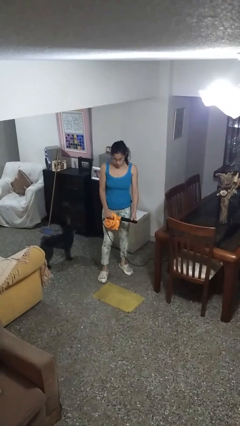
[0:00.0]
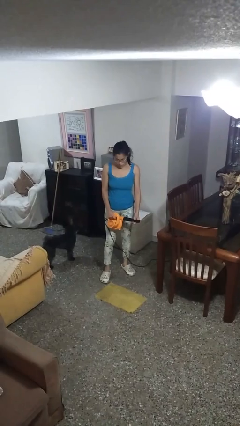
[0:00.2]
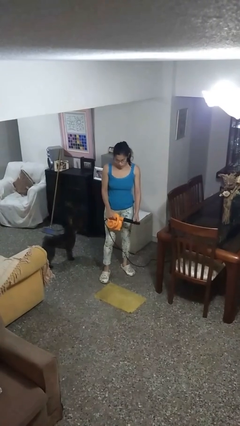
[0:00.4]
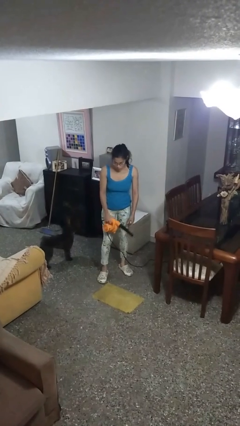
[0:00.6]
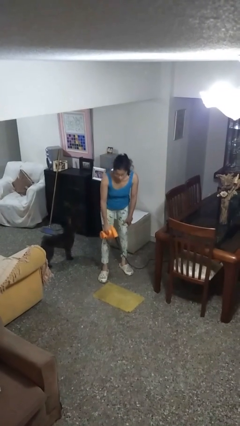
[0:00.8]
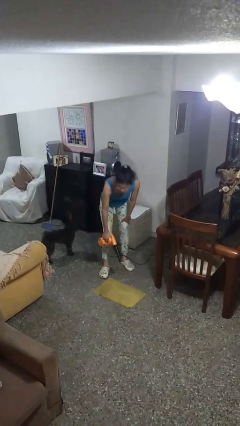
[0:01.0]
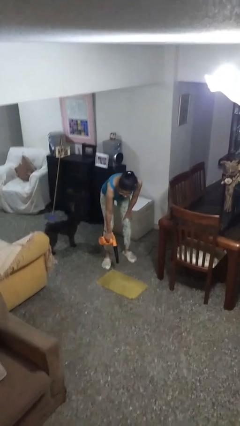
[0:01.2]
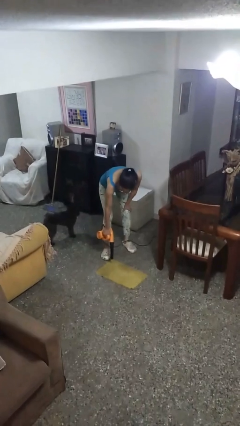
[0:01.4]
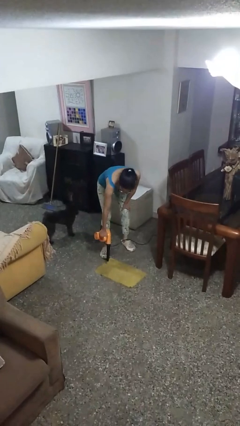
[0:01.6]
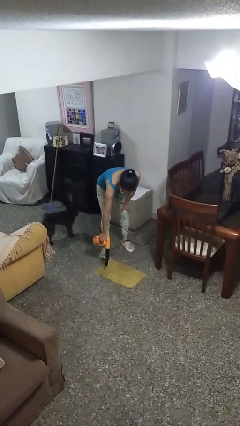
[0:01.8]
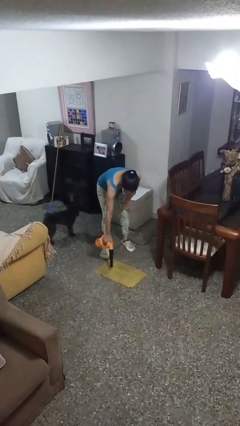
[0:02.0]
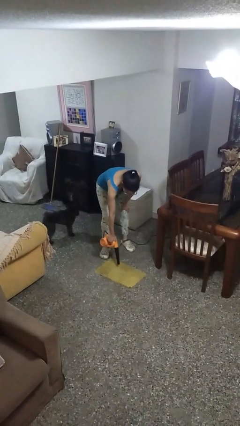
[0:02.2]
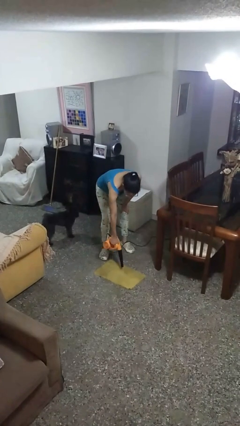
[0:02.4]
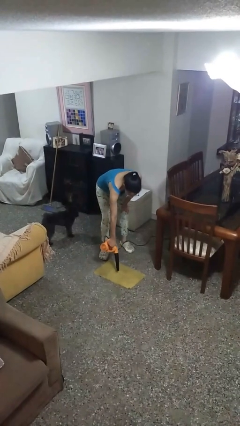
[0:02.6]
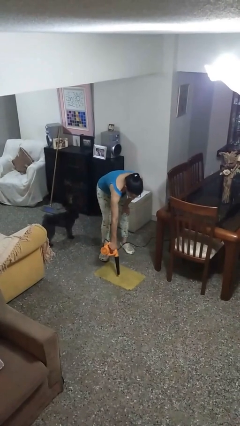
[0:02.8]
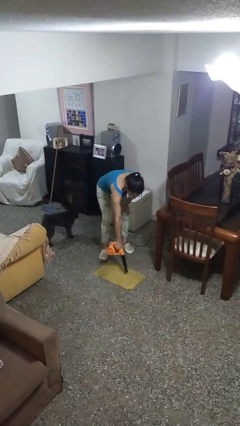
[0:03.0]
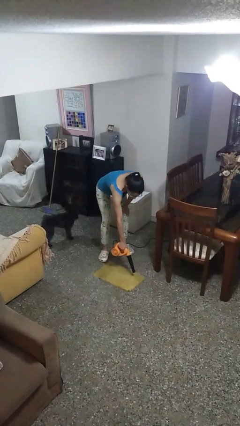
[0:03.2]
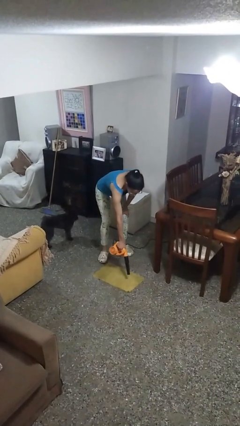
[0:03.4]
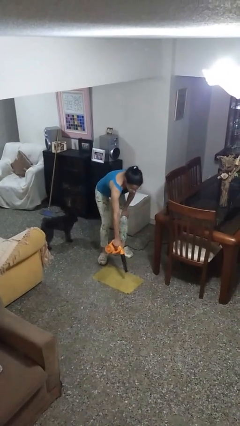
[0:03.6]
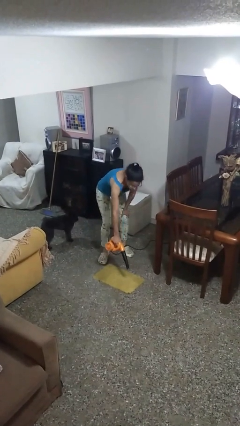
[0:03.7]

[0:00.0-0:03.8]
person vacuums carpet

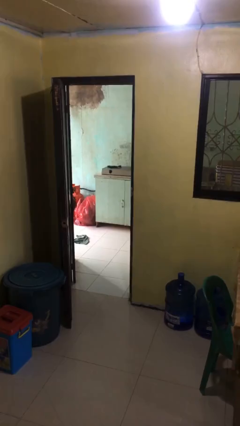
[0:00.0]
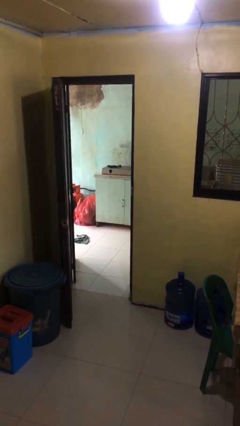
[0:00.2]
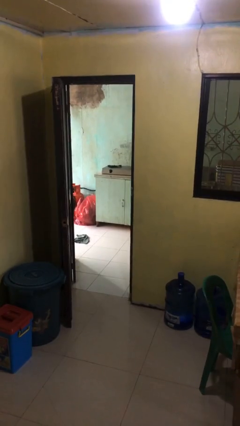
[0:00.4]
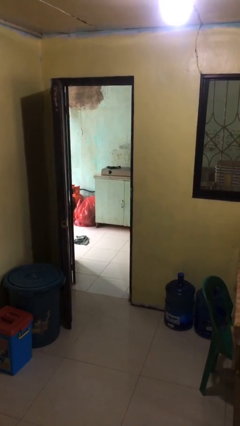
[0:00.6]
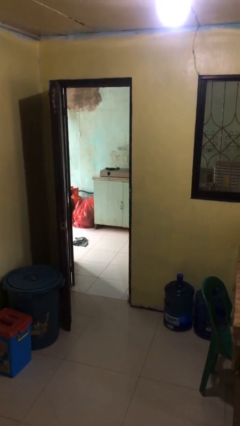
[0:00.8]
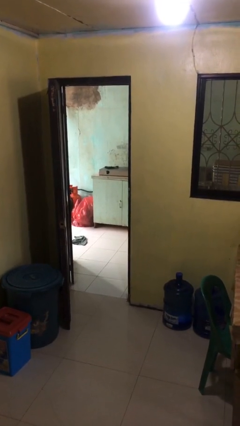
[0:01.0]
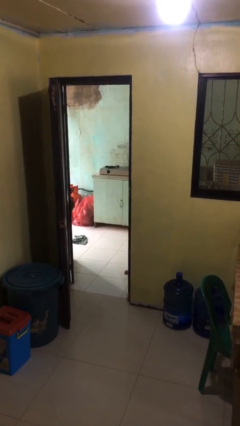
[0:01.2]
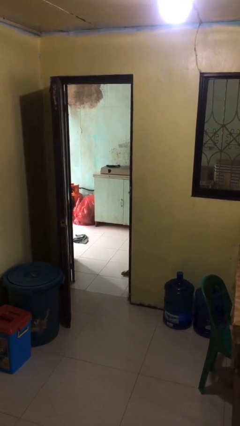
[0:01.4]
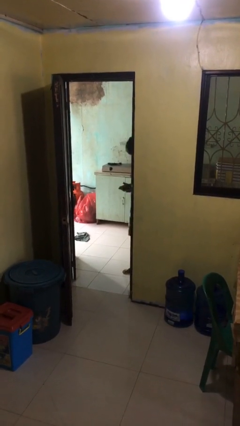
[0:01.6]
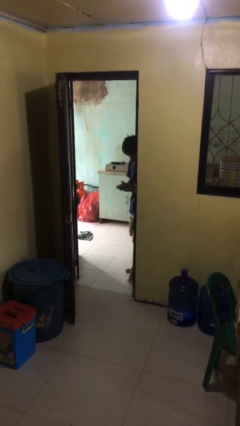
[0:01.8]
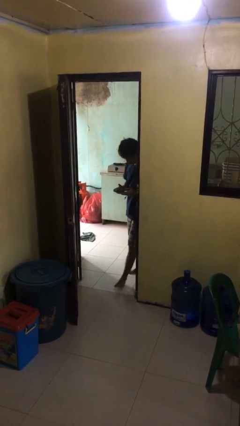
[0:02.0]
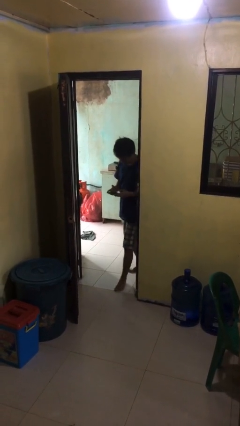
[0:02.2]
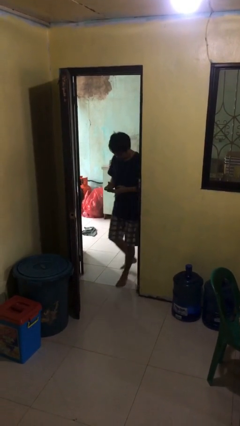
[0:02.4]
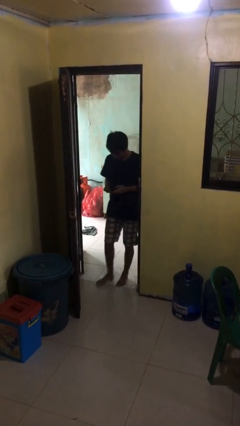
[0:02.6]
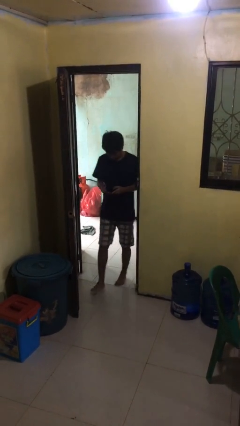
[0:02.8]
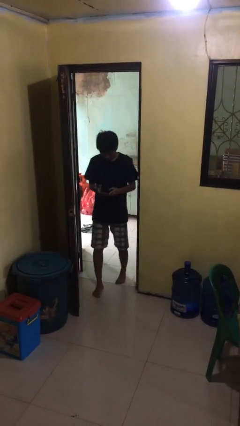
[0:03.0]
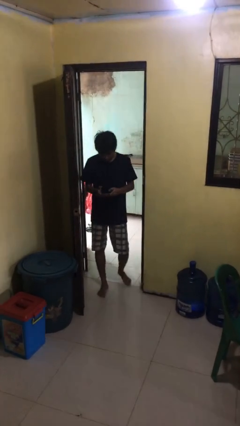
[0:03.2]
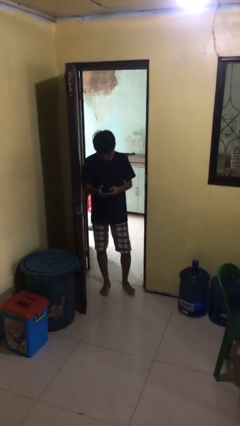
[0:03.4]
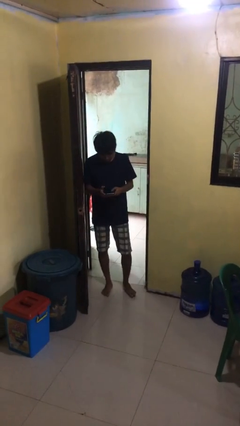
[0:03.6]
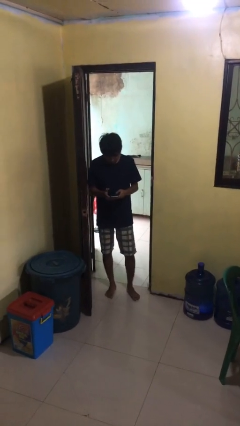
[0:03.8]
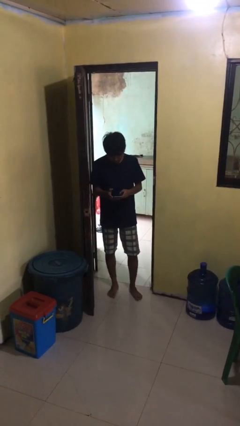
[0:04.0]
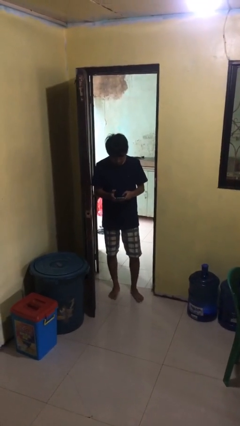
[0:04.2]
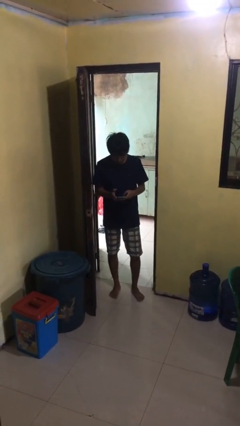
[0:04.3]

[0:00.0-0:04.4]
person enters scene through structure

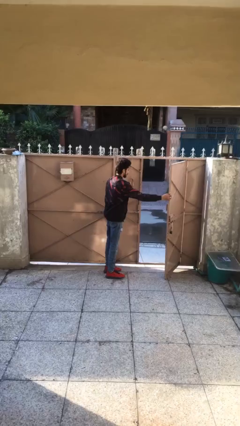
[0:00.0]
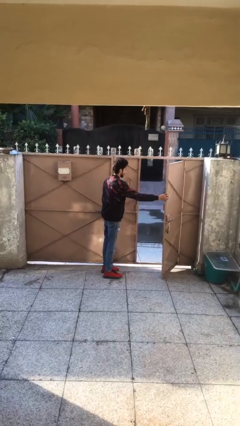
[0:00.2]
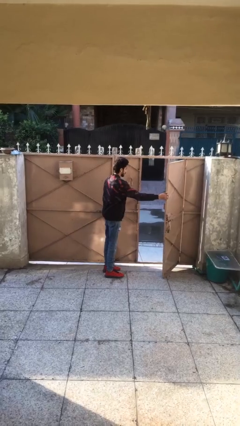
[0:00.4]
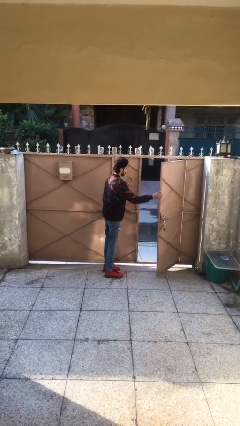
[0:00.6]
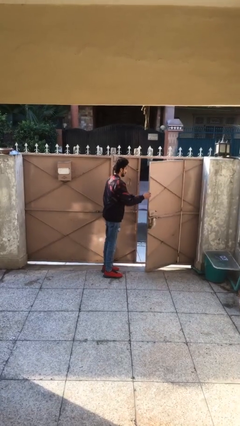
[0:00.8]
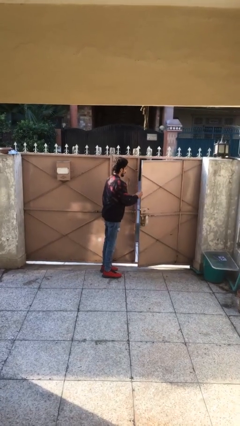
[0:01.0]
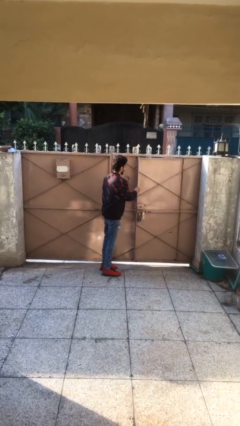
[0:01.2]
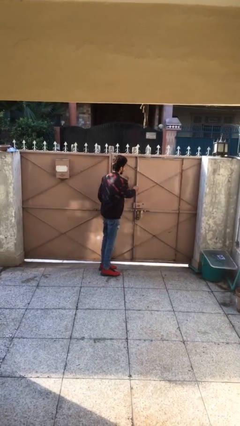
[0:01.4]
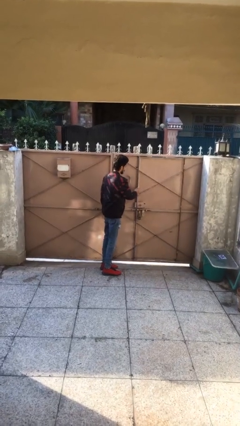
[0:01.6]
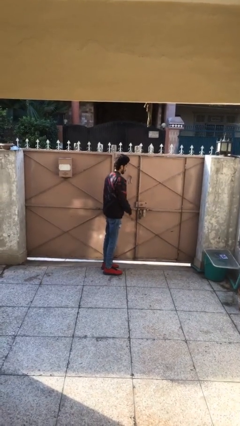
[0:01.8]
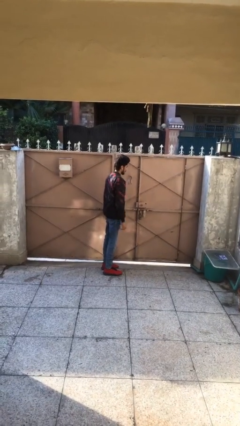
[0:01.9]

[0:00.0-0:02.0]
person closes facility door

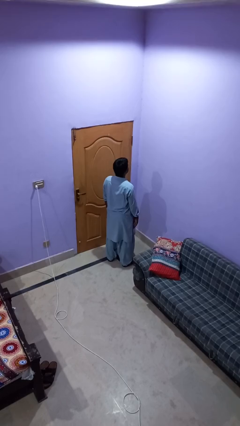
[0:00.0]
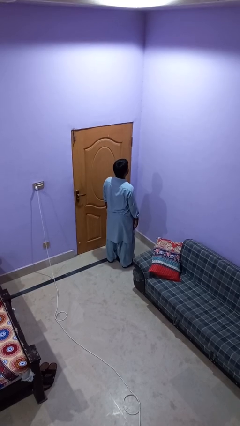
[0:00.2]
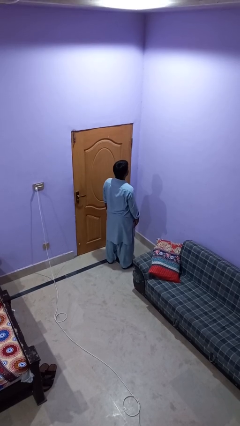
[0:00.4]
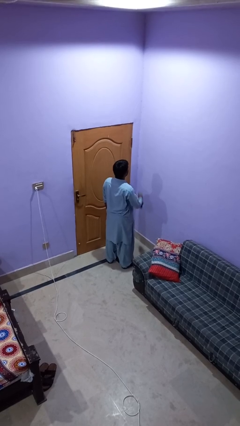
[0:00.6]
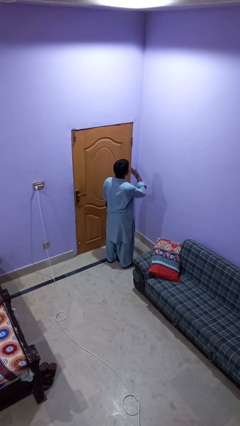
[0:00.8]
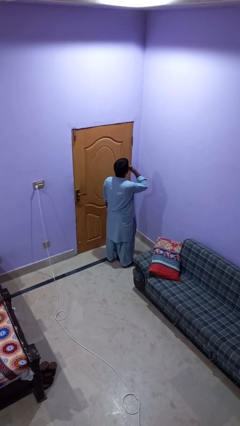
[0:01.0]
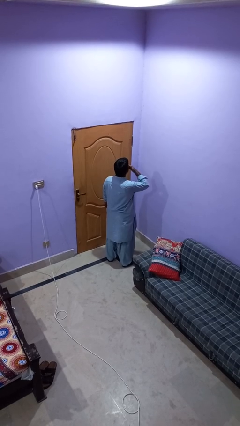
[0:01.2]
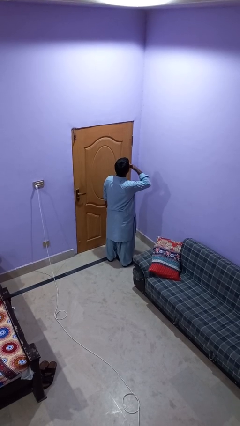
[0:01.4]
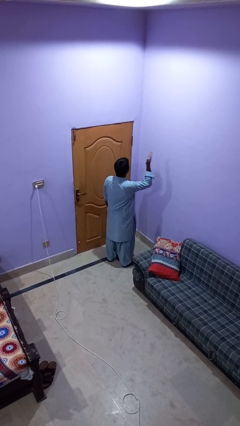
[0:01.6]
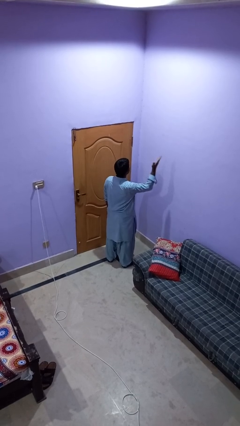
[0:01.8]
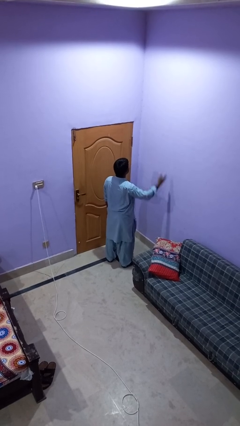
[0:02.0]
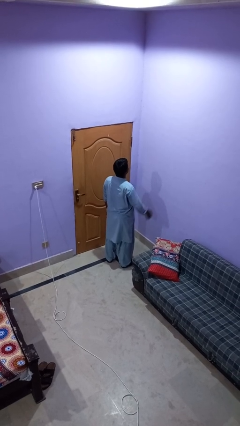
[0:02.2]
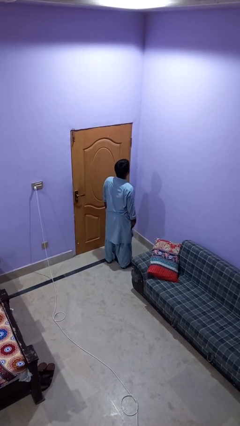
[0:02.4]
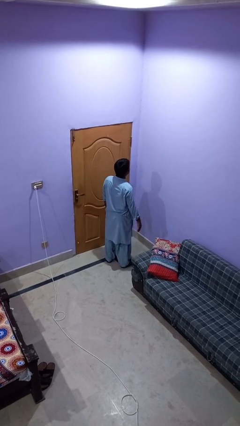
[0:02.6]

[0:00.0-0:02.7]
person gestures blow kiss

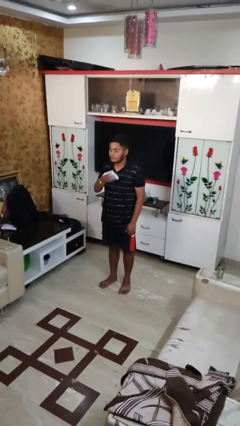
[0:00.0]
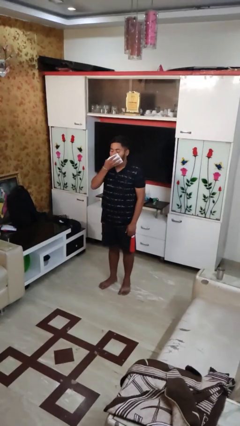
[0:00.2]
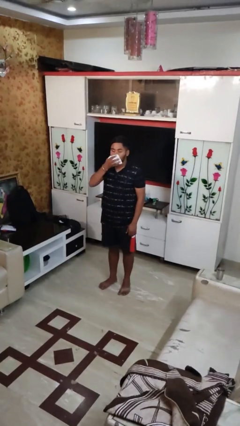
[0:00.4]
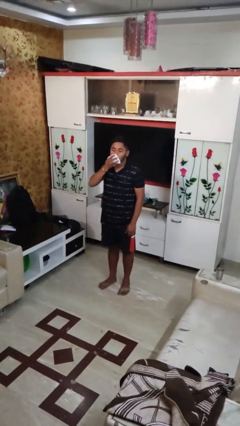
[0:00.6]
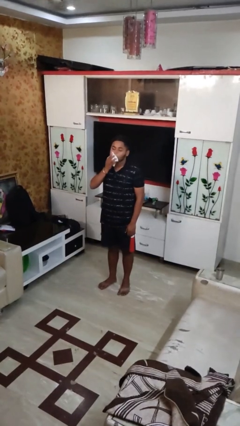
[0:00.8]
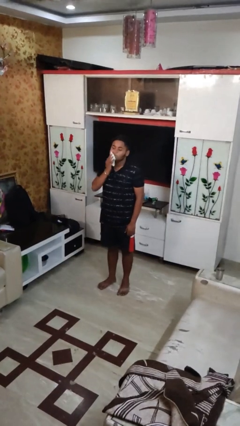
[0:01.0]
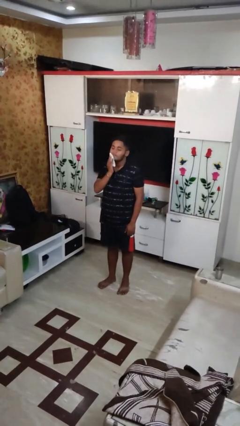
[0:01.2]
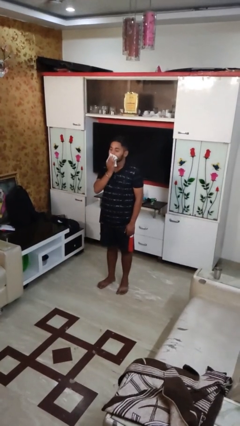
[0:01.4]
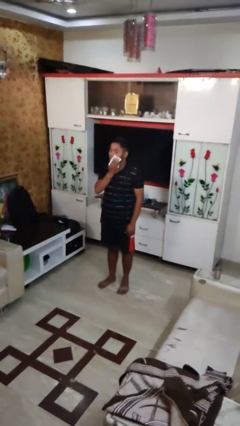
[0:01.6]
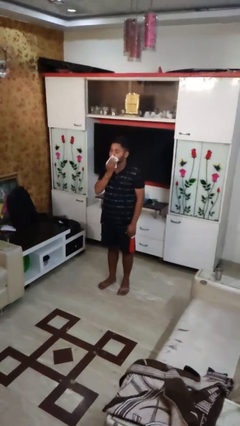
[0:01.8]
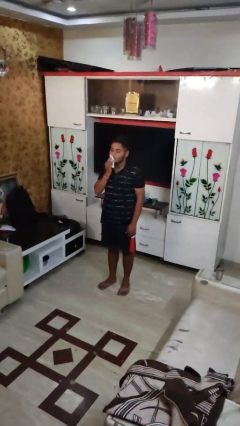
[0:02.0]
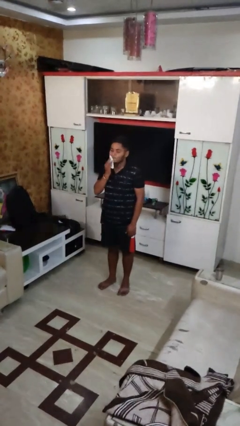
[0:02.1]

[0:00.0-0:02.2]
person wipes mouth with napkin

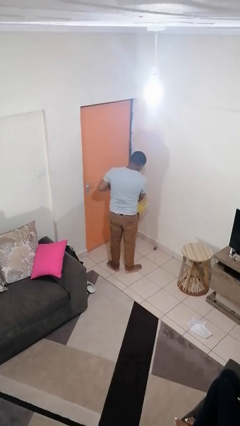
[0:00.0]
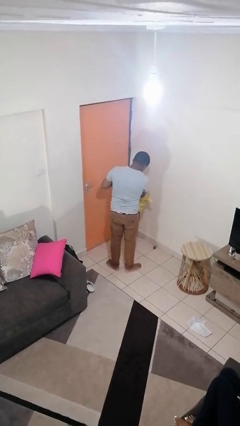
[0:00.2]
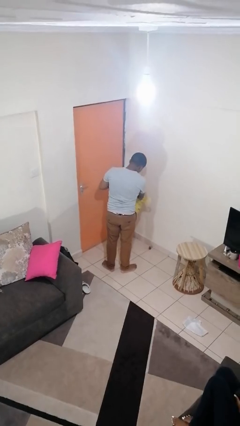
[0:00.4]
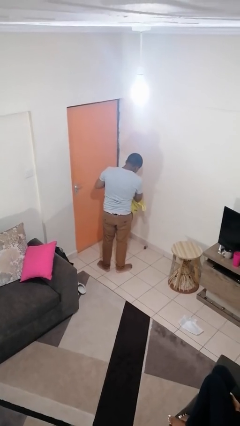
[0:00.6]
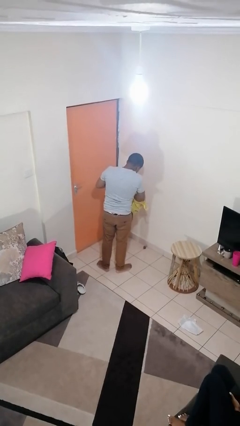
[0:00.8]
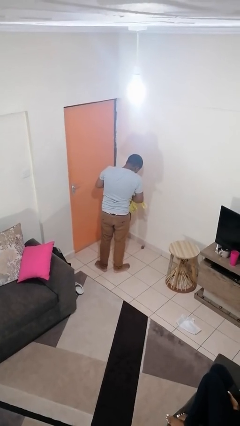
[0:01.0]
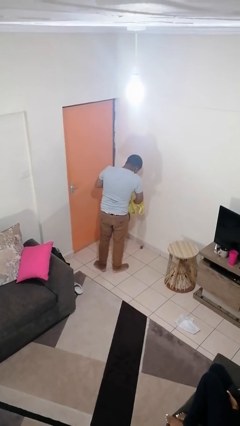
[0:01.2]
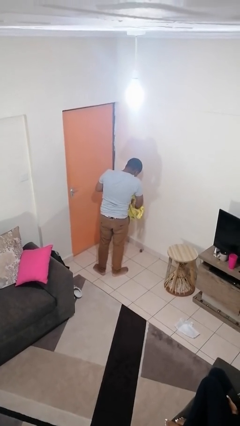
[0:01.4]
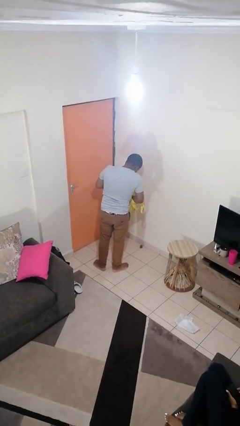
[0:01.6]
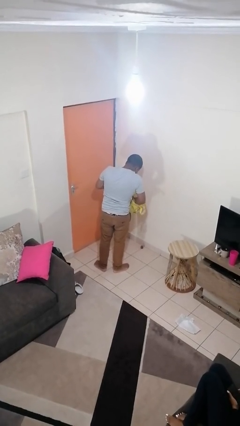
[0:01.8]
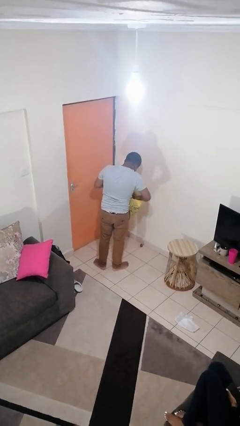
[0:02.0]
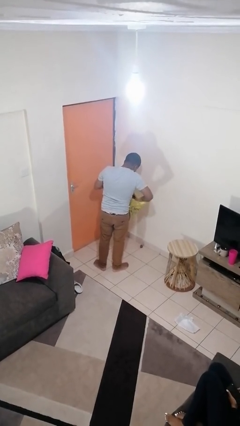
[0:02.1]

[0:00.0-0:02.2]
person searches in bag

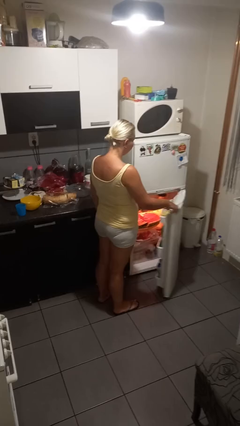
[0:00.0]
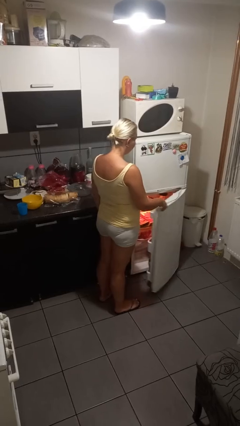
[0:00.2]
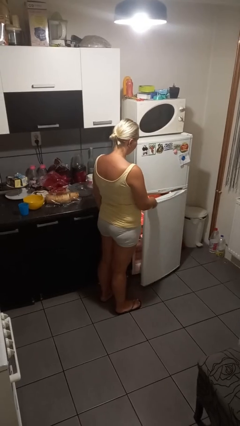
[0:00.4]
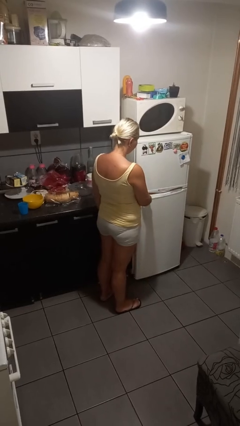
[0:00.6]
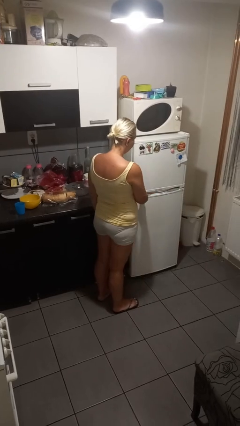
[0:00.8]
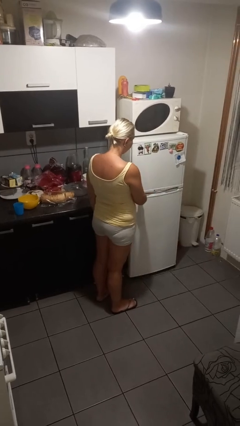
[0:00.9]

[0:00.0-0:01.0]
person closes refrigerator
